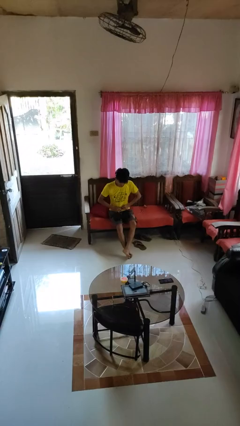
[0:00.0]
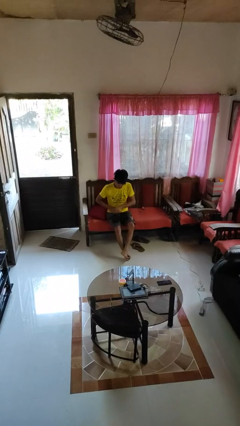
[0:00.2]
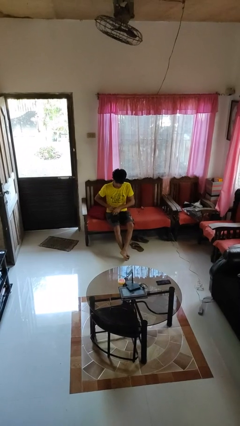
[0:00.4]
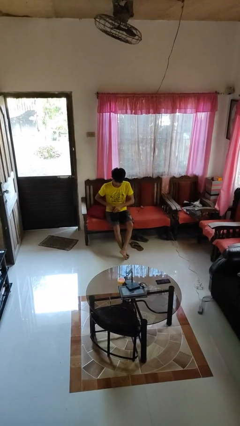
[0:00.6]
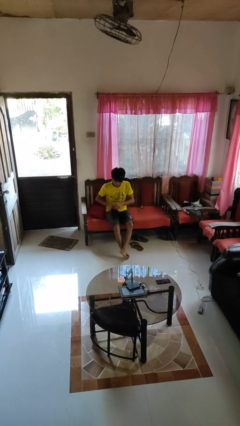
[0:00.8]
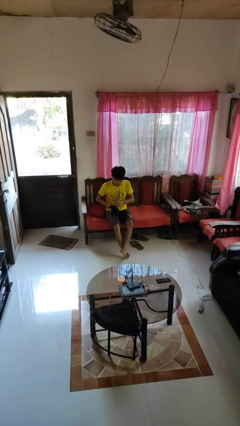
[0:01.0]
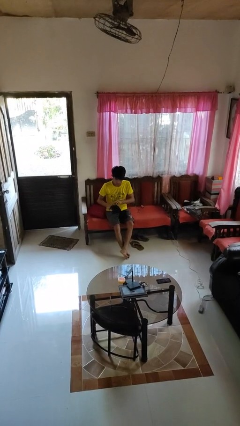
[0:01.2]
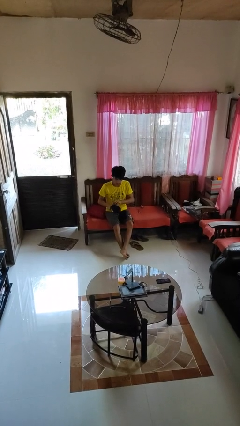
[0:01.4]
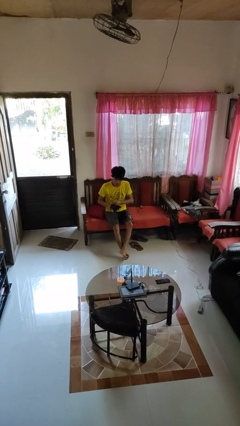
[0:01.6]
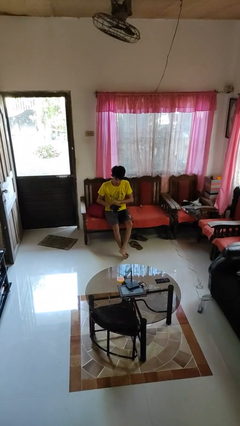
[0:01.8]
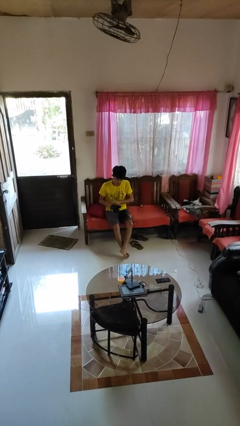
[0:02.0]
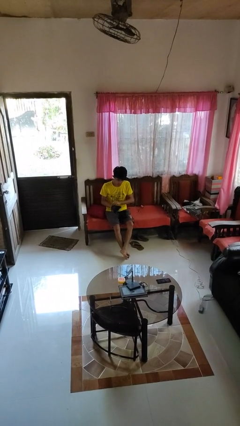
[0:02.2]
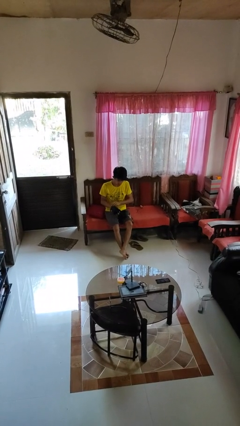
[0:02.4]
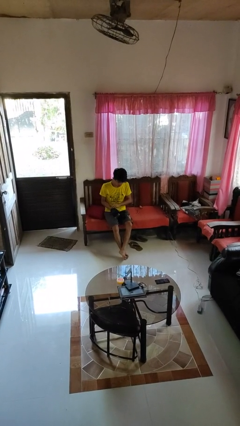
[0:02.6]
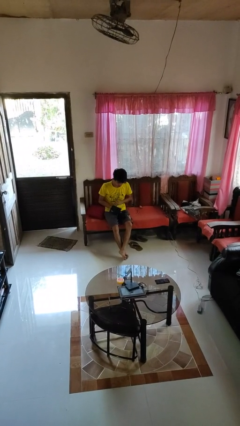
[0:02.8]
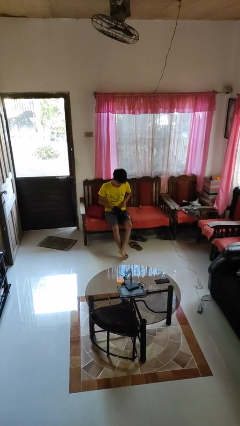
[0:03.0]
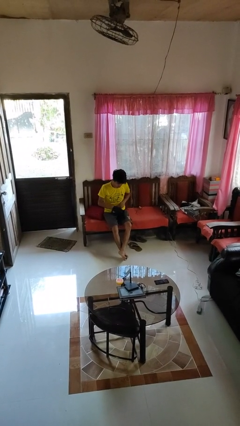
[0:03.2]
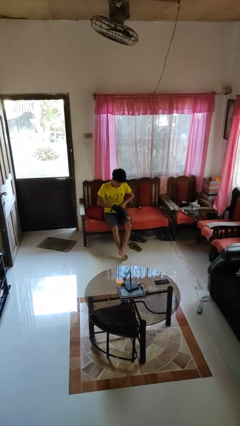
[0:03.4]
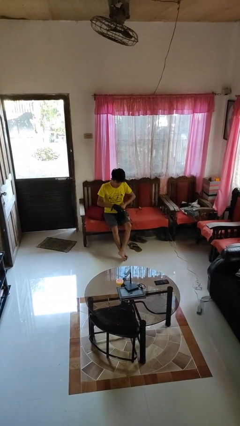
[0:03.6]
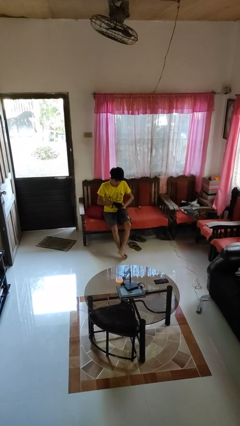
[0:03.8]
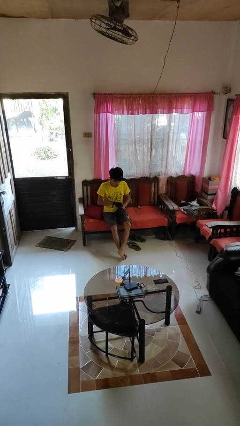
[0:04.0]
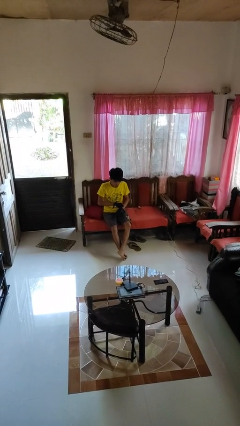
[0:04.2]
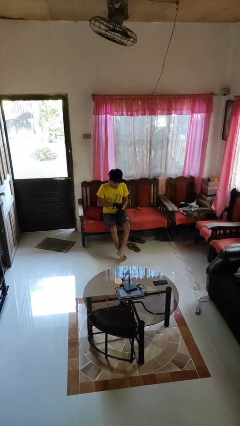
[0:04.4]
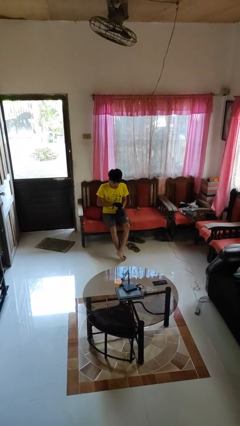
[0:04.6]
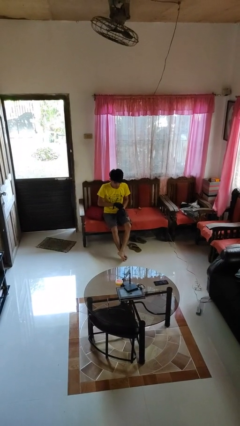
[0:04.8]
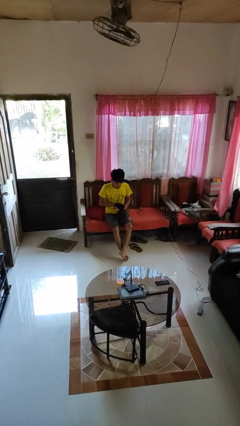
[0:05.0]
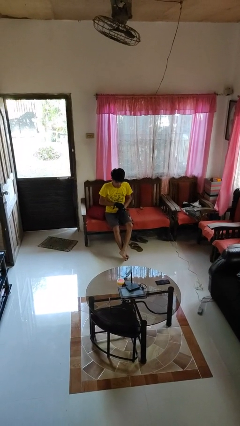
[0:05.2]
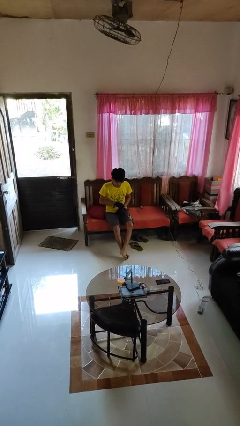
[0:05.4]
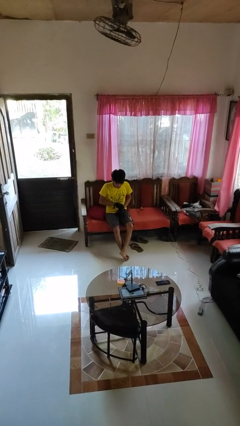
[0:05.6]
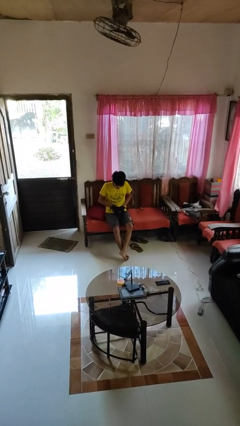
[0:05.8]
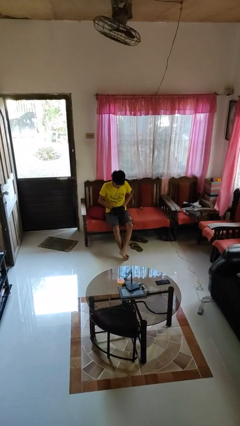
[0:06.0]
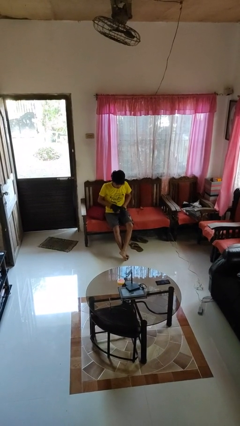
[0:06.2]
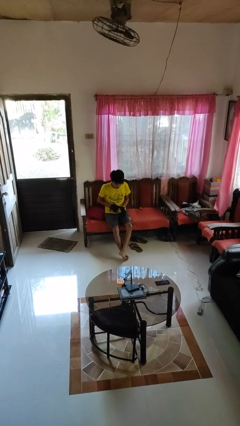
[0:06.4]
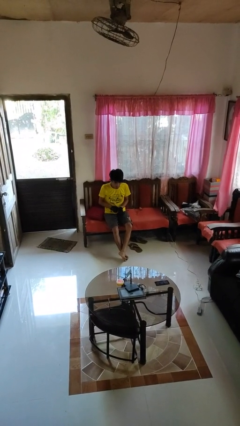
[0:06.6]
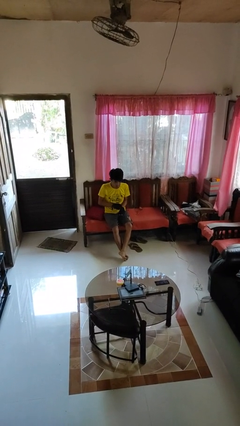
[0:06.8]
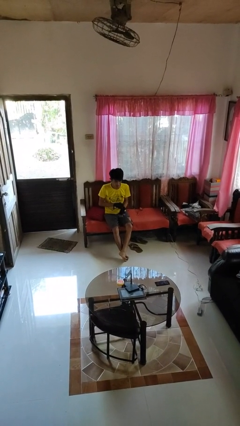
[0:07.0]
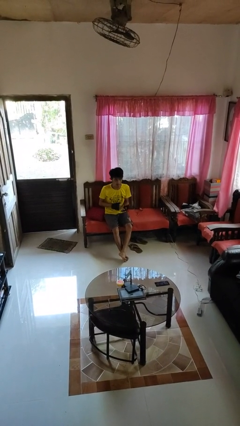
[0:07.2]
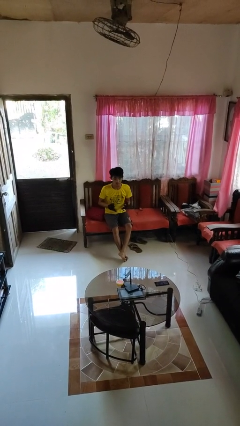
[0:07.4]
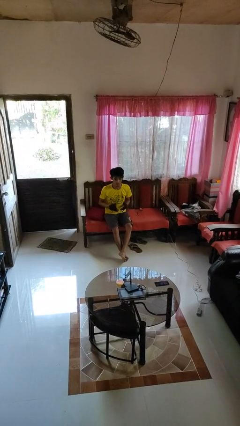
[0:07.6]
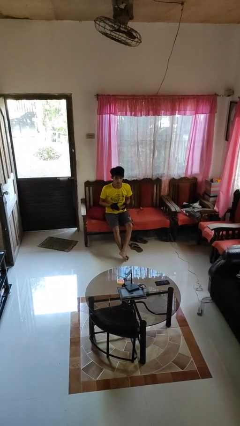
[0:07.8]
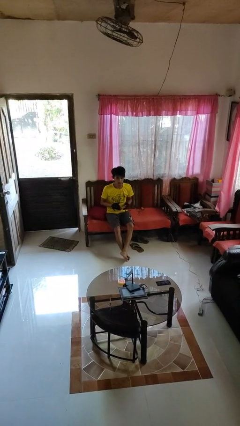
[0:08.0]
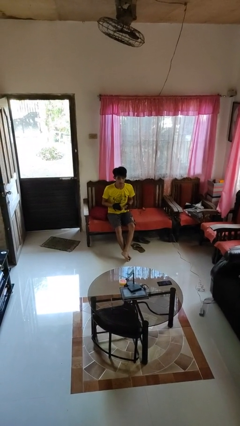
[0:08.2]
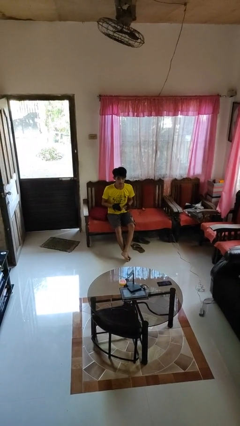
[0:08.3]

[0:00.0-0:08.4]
person puts on gloves

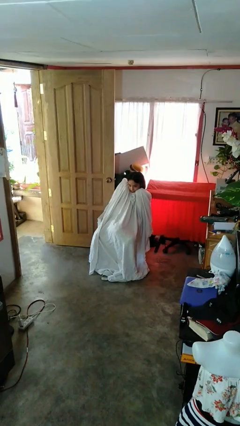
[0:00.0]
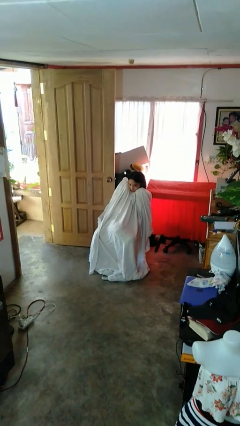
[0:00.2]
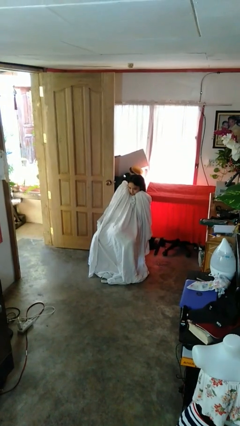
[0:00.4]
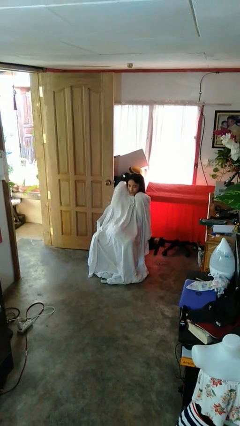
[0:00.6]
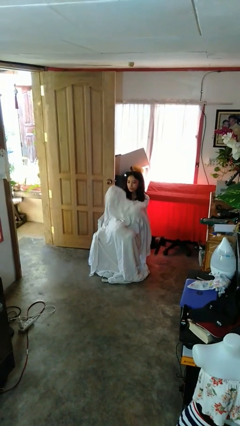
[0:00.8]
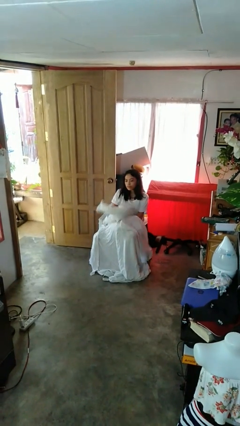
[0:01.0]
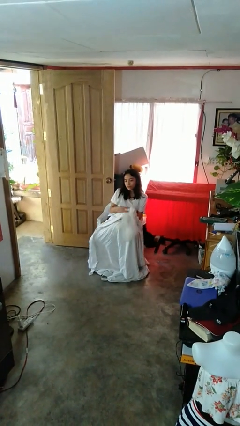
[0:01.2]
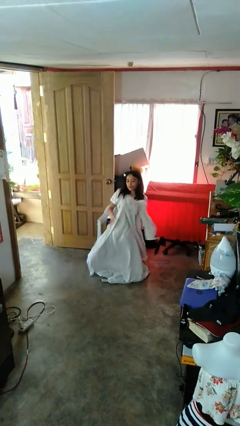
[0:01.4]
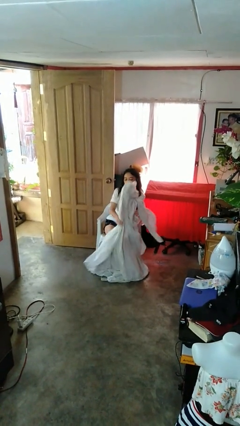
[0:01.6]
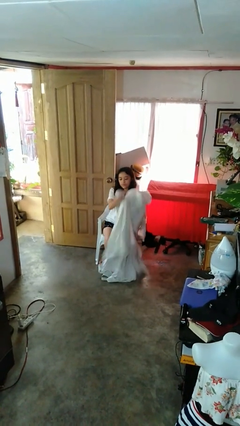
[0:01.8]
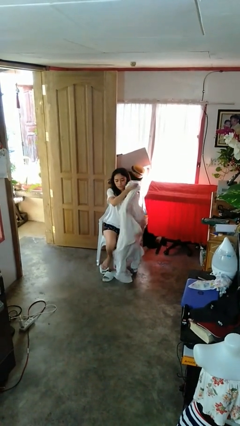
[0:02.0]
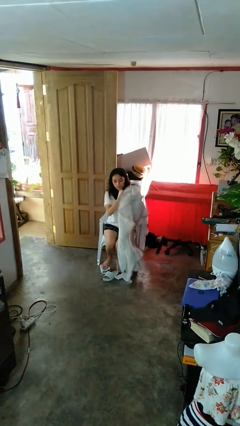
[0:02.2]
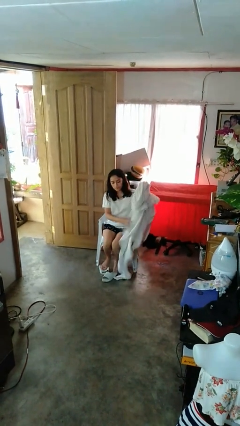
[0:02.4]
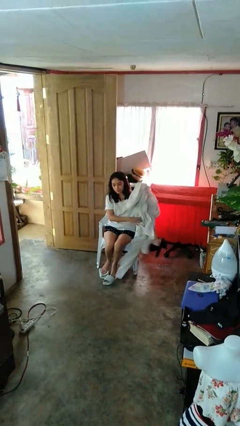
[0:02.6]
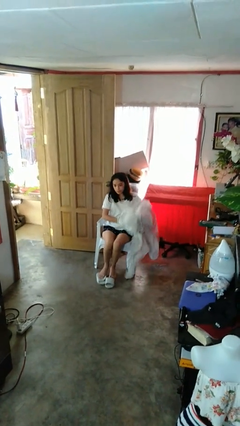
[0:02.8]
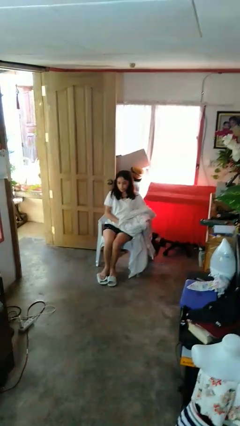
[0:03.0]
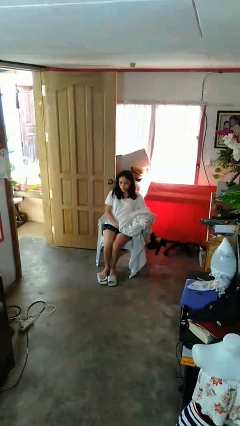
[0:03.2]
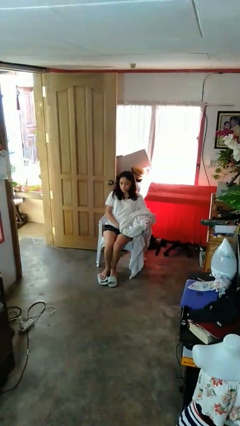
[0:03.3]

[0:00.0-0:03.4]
person uncovers with blanket

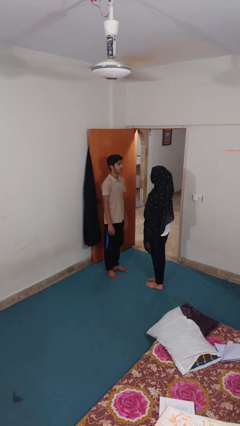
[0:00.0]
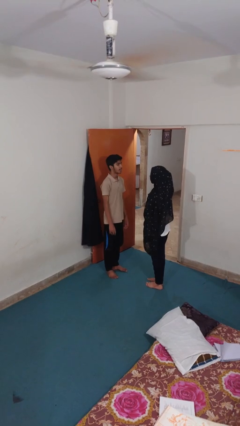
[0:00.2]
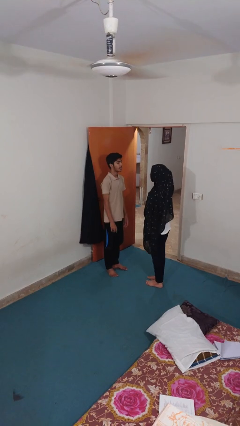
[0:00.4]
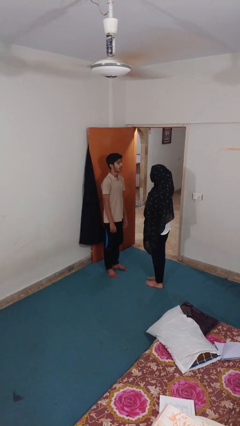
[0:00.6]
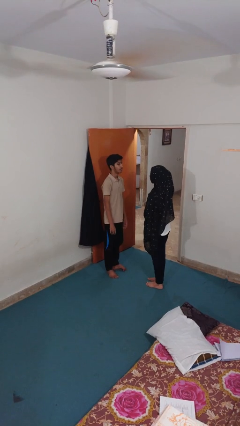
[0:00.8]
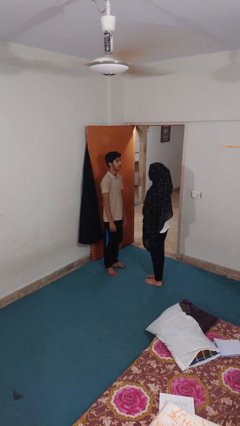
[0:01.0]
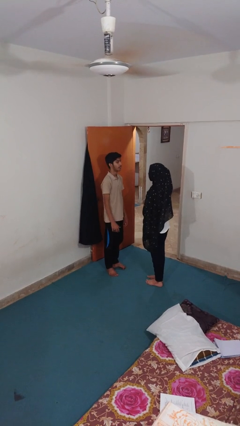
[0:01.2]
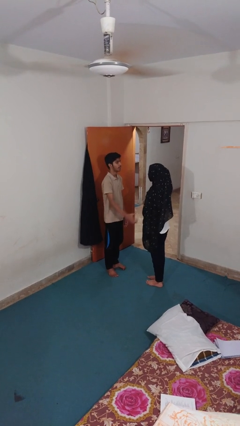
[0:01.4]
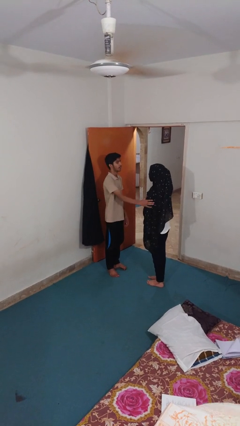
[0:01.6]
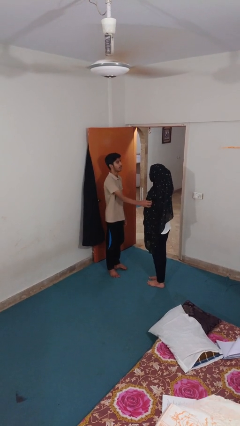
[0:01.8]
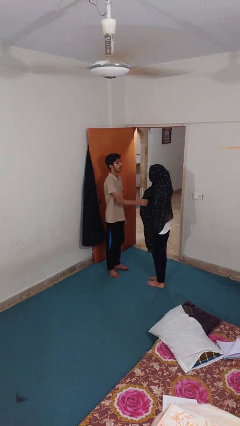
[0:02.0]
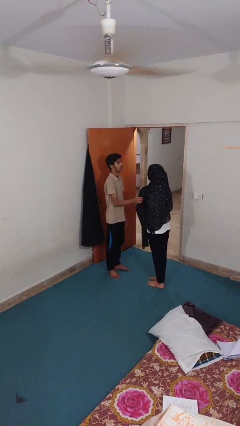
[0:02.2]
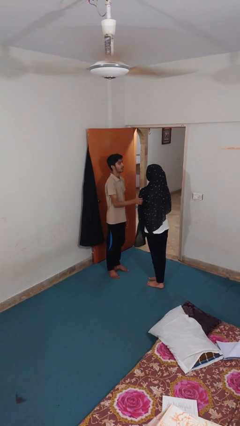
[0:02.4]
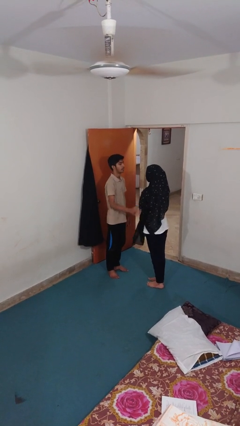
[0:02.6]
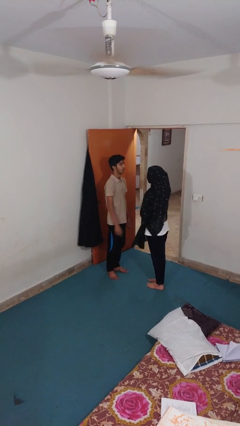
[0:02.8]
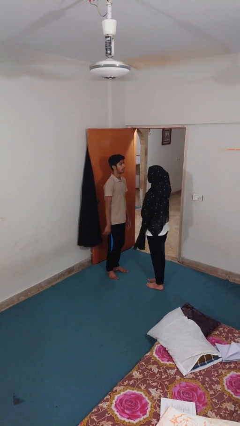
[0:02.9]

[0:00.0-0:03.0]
person grabs person by bicep

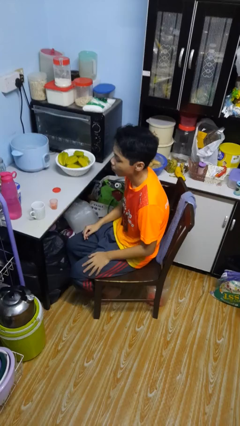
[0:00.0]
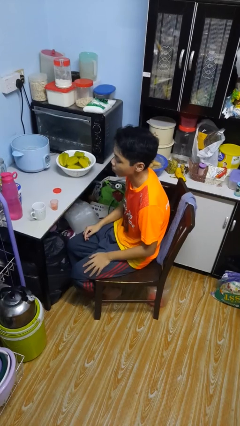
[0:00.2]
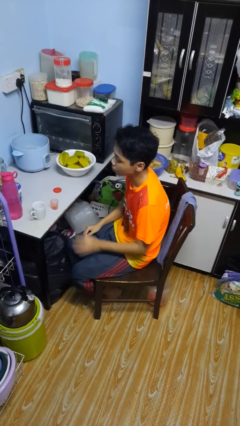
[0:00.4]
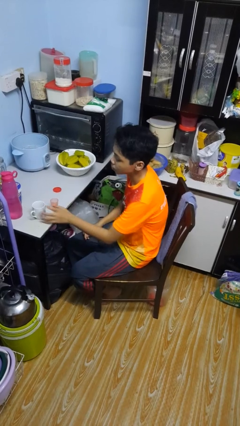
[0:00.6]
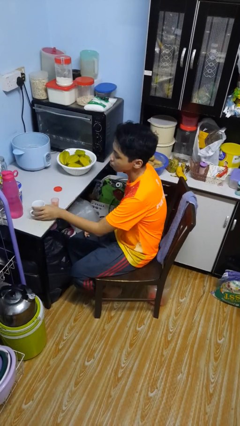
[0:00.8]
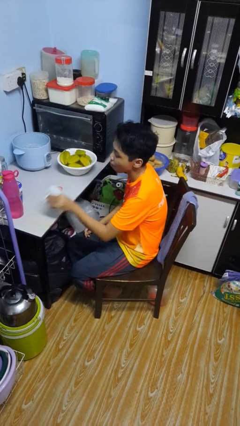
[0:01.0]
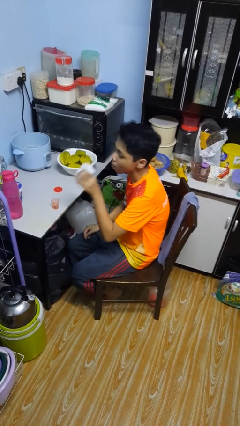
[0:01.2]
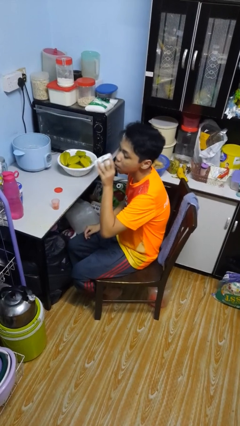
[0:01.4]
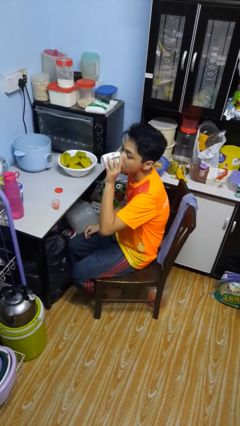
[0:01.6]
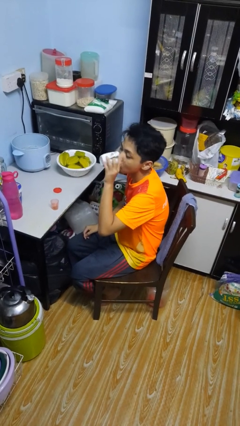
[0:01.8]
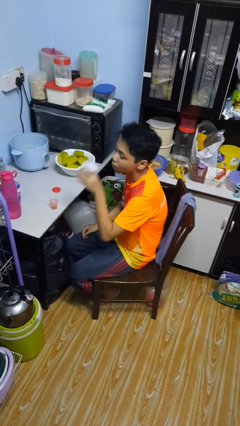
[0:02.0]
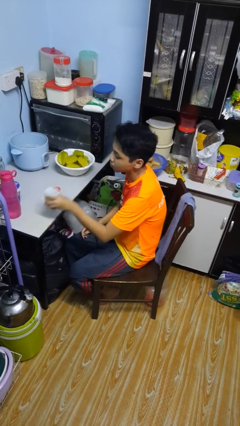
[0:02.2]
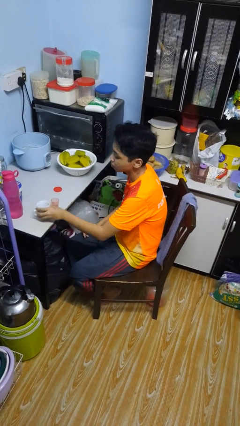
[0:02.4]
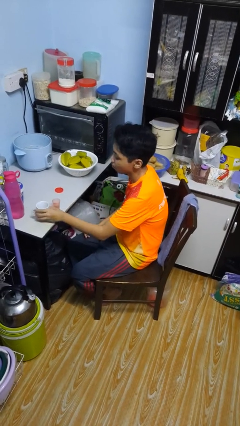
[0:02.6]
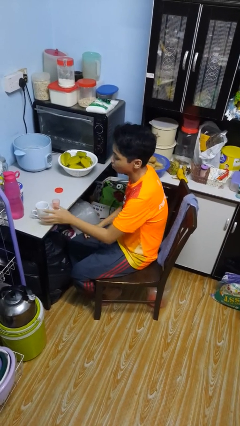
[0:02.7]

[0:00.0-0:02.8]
person drinks from cup

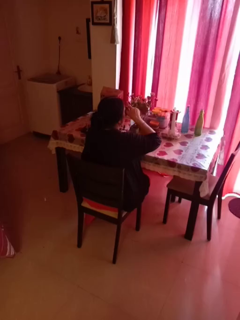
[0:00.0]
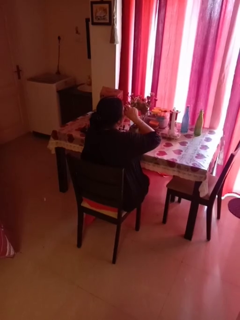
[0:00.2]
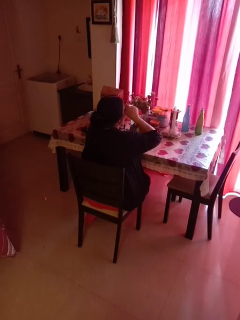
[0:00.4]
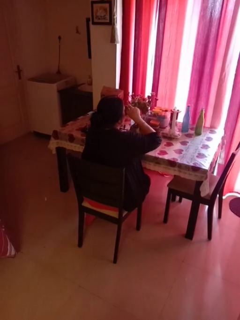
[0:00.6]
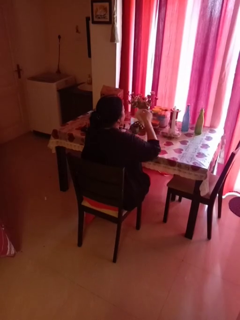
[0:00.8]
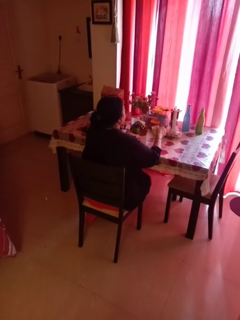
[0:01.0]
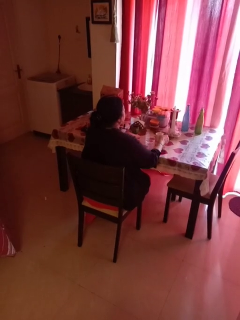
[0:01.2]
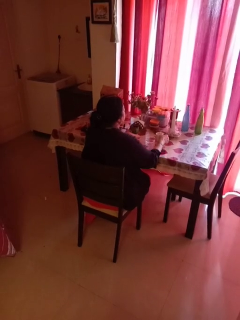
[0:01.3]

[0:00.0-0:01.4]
person drinks from mug
